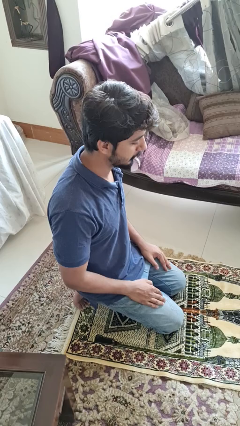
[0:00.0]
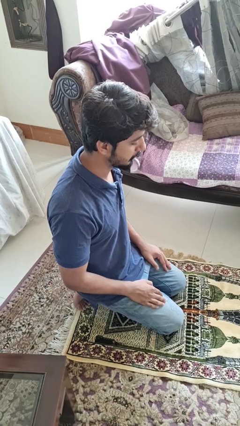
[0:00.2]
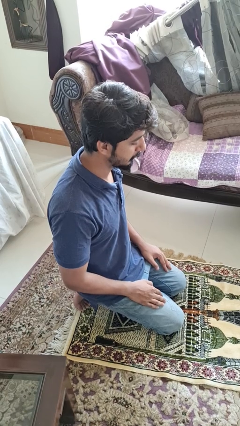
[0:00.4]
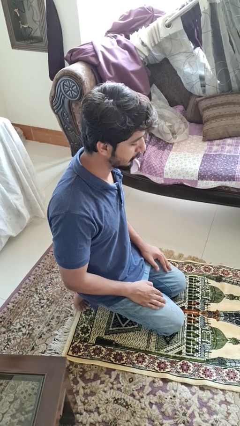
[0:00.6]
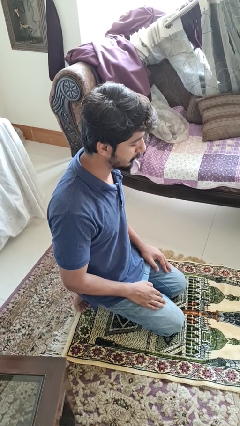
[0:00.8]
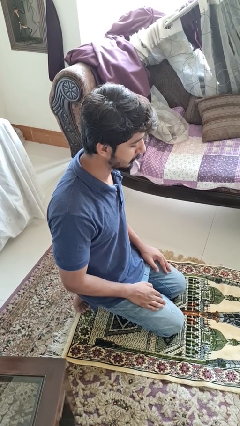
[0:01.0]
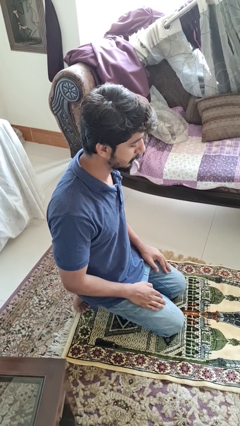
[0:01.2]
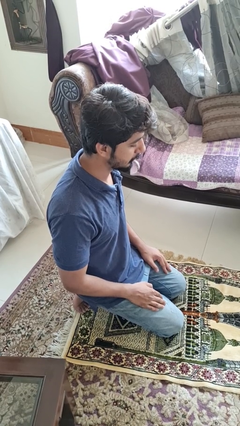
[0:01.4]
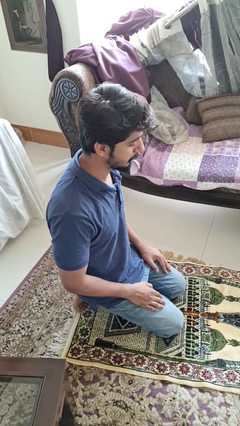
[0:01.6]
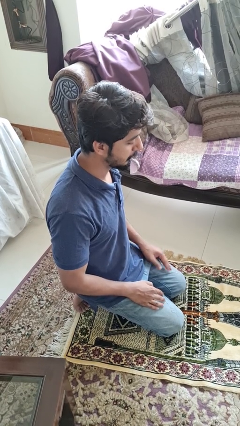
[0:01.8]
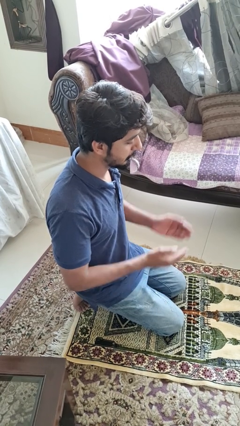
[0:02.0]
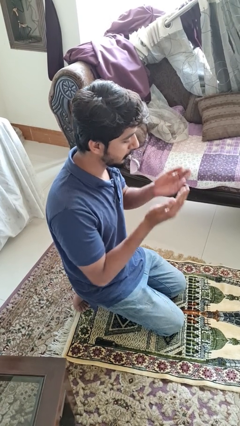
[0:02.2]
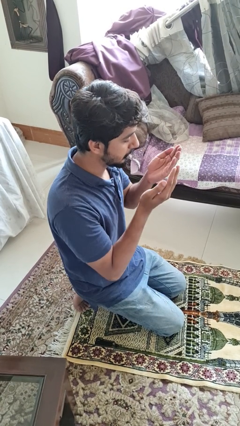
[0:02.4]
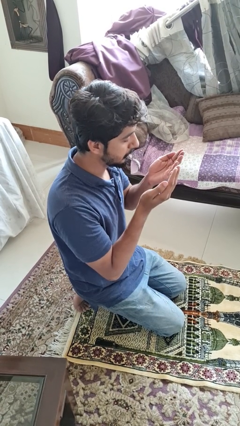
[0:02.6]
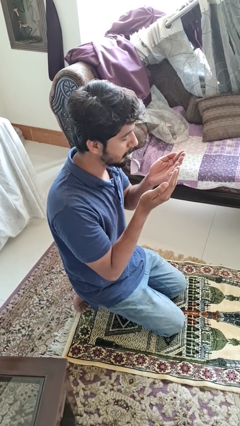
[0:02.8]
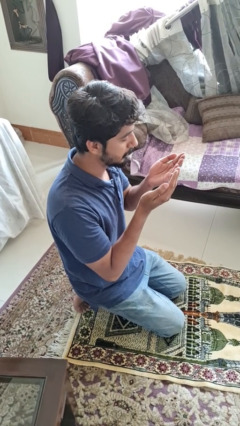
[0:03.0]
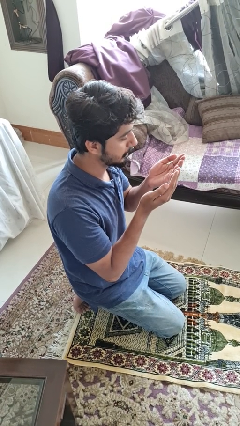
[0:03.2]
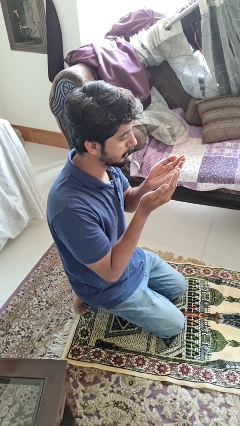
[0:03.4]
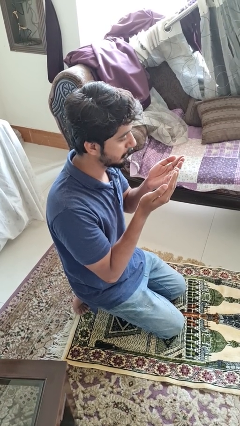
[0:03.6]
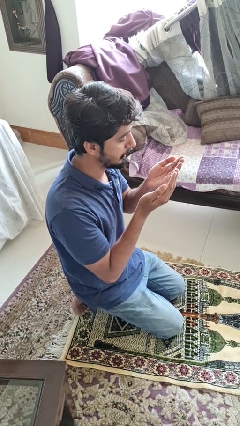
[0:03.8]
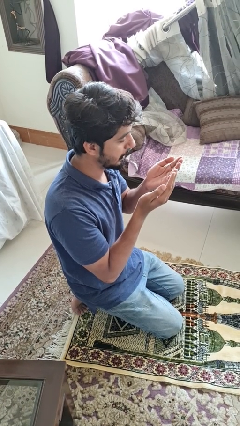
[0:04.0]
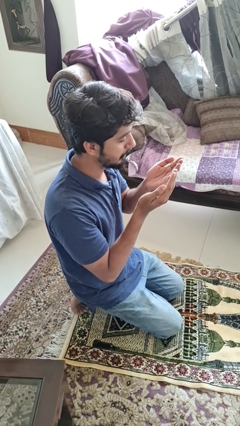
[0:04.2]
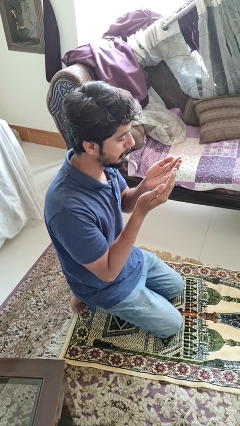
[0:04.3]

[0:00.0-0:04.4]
person prays

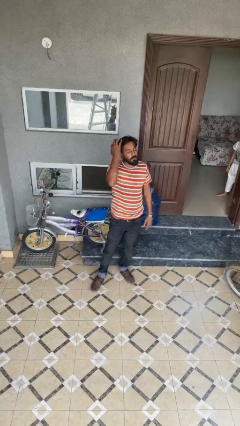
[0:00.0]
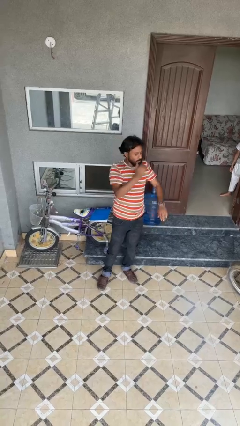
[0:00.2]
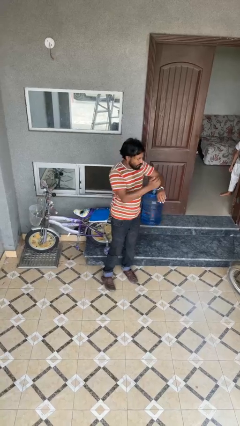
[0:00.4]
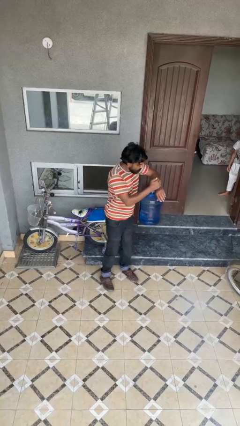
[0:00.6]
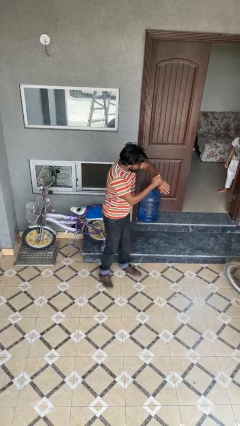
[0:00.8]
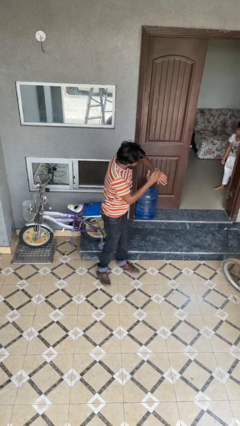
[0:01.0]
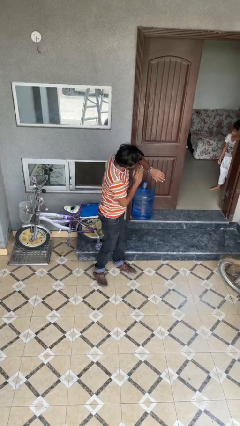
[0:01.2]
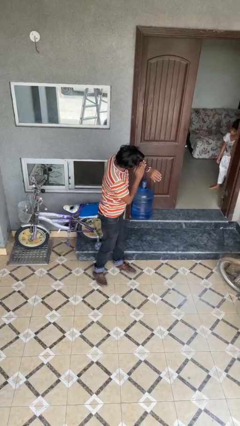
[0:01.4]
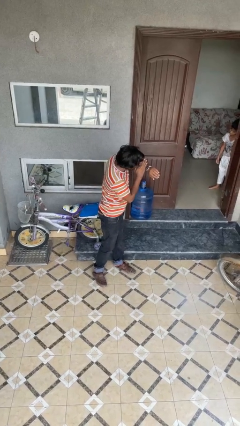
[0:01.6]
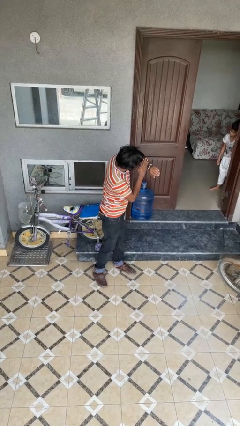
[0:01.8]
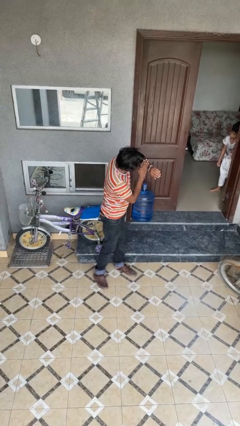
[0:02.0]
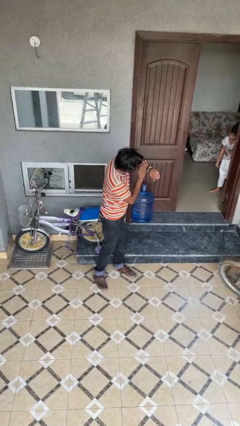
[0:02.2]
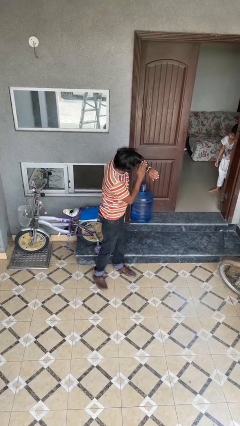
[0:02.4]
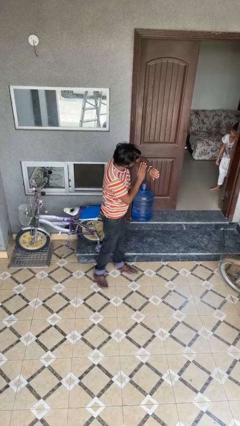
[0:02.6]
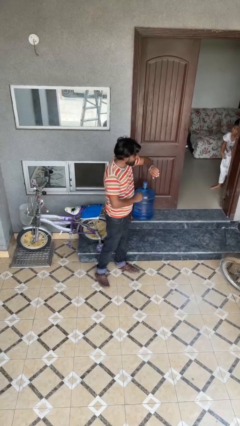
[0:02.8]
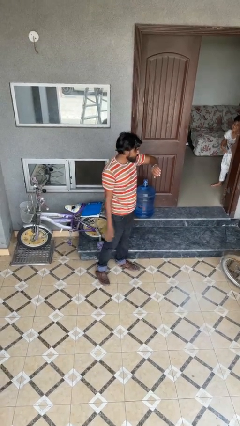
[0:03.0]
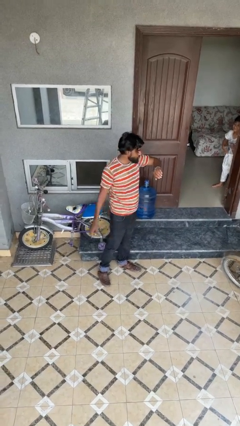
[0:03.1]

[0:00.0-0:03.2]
person looks at wristwatch

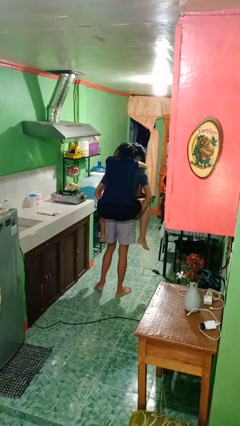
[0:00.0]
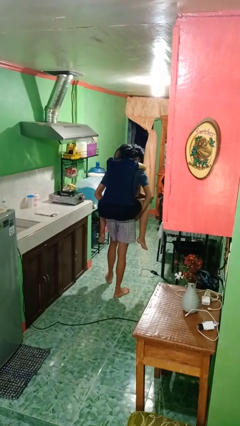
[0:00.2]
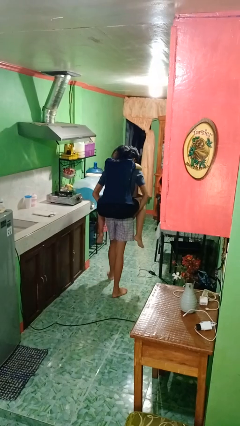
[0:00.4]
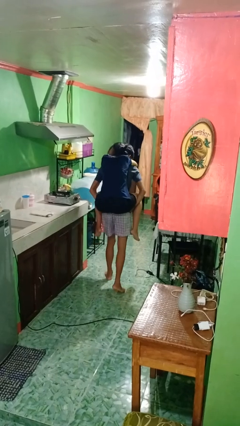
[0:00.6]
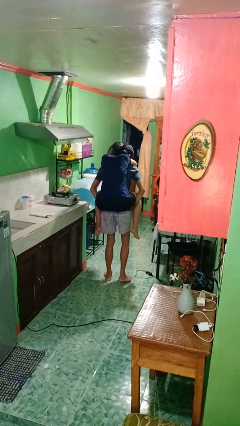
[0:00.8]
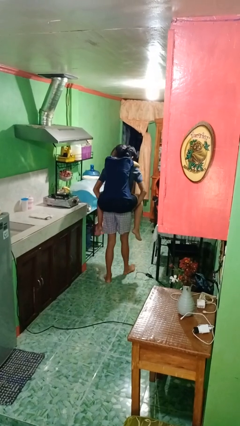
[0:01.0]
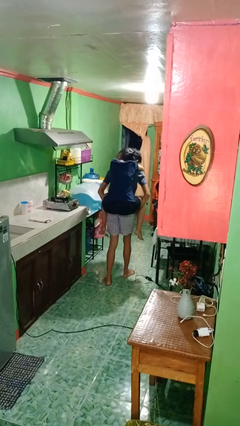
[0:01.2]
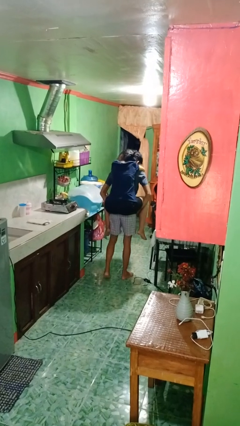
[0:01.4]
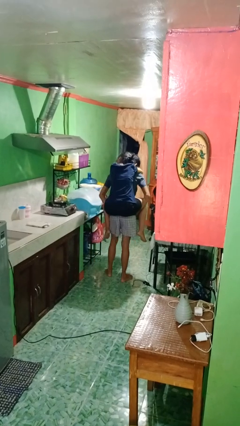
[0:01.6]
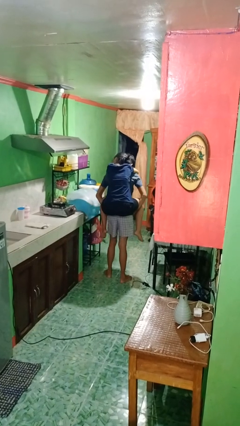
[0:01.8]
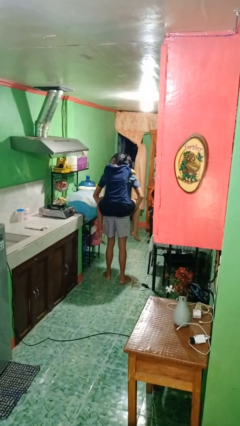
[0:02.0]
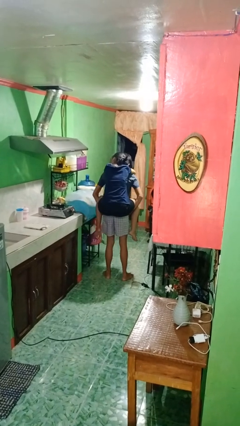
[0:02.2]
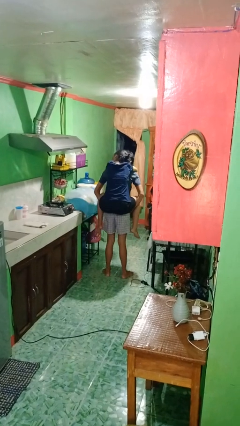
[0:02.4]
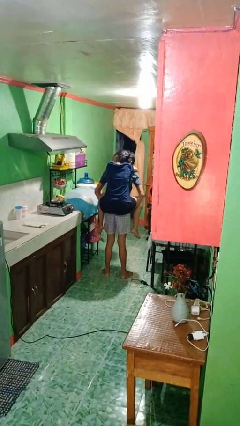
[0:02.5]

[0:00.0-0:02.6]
person carries person on back

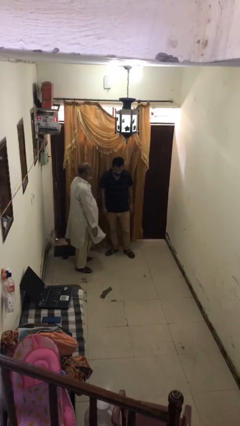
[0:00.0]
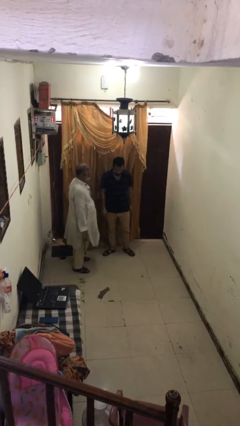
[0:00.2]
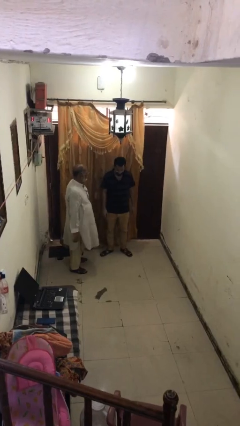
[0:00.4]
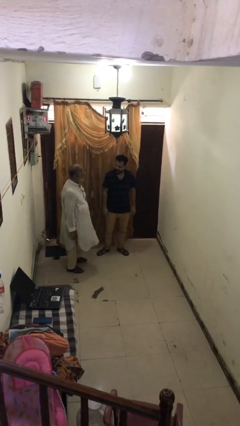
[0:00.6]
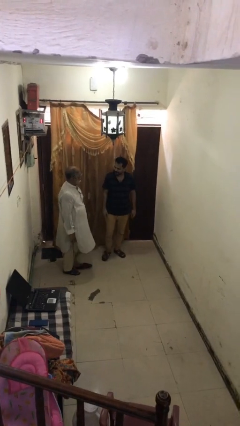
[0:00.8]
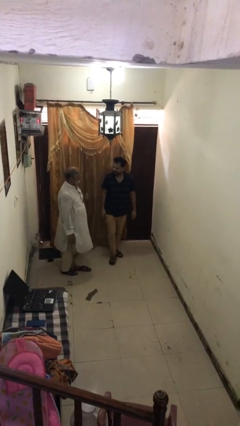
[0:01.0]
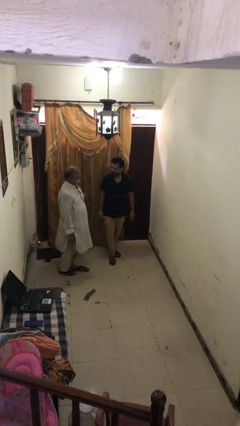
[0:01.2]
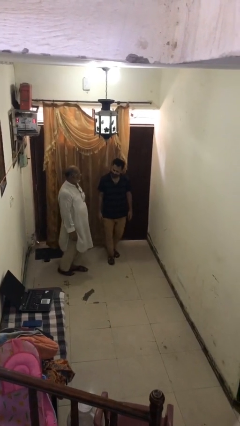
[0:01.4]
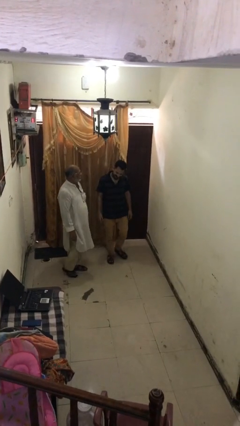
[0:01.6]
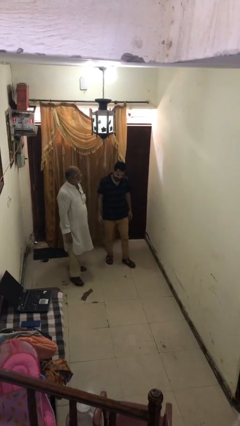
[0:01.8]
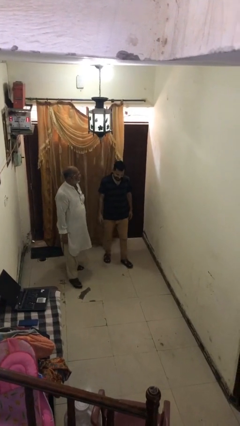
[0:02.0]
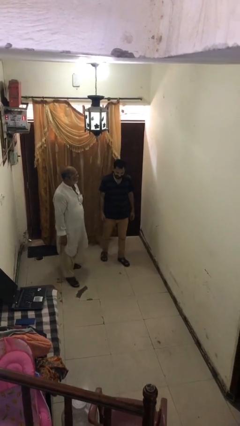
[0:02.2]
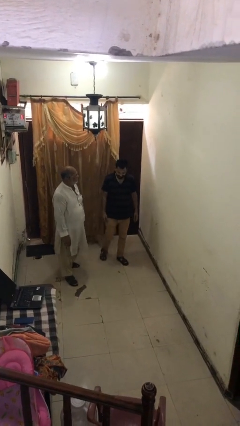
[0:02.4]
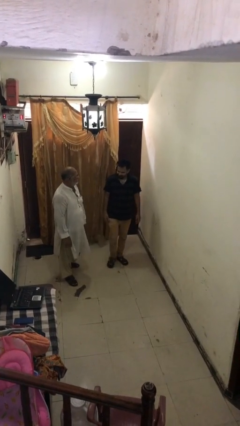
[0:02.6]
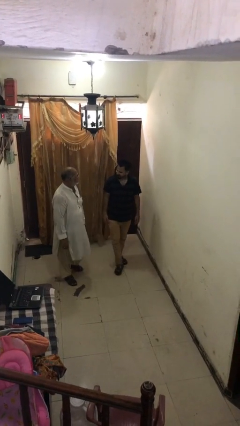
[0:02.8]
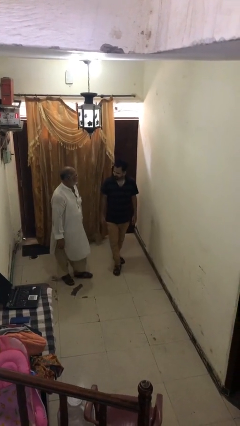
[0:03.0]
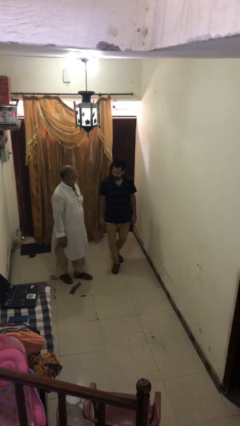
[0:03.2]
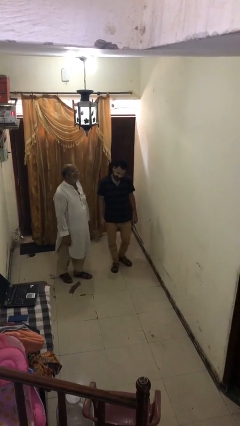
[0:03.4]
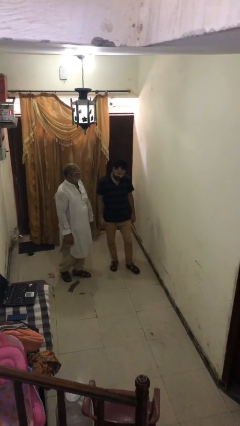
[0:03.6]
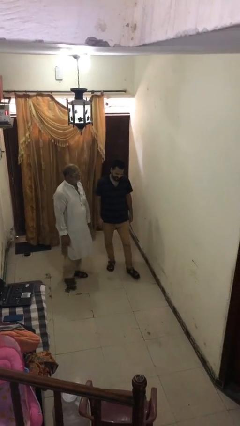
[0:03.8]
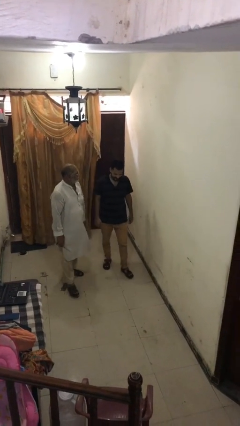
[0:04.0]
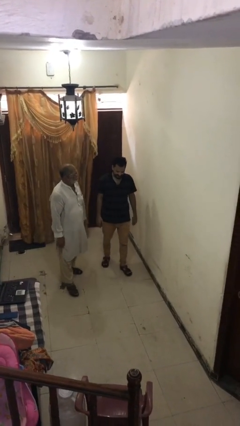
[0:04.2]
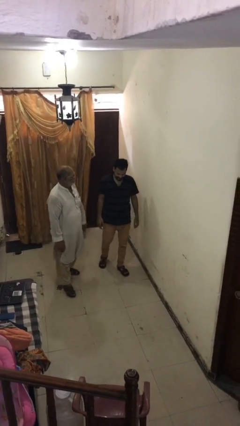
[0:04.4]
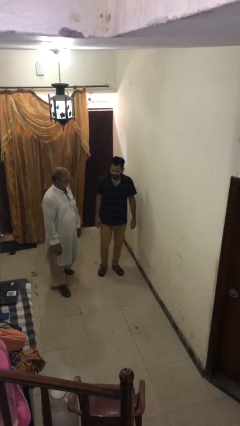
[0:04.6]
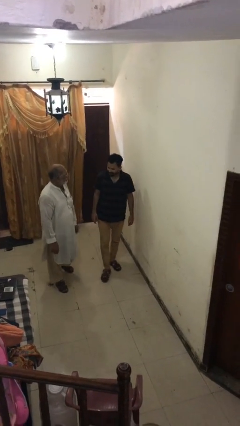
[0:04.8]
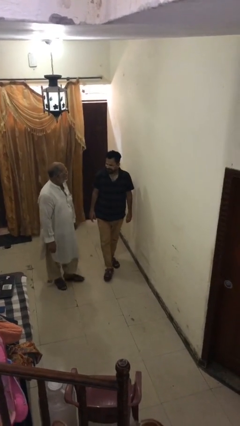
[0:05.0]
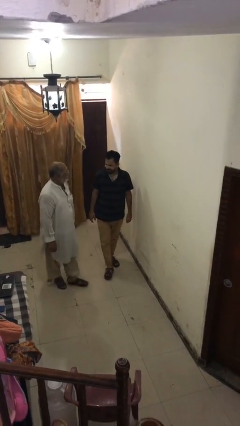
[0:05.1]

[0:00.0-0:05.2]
person talks to person

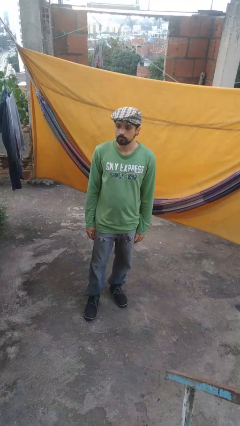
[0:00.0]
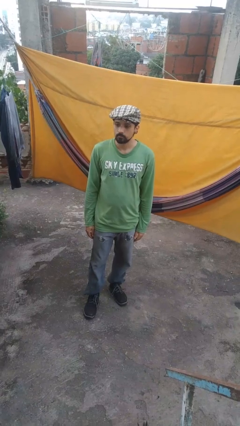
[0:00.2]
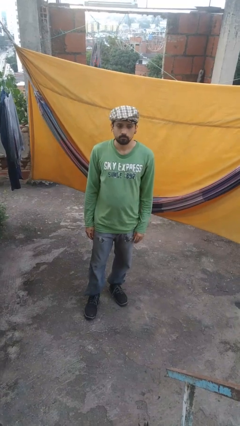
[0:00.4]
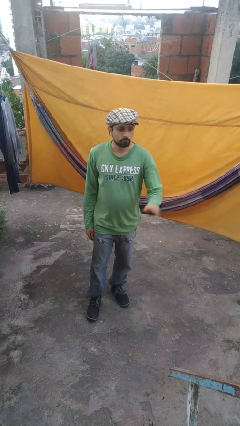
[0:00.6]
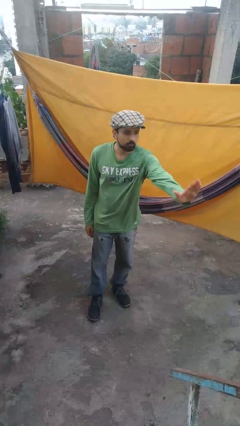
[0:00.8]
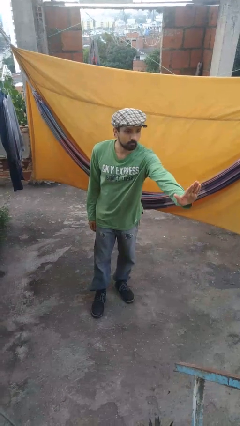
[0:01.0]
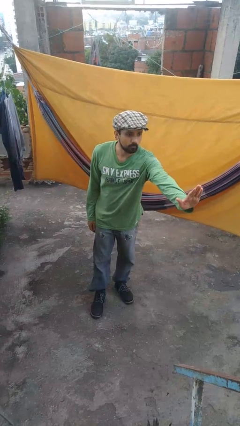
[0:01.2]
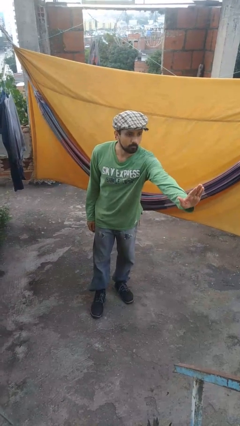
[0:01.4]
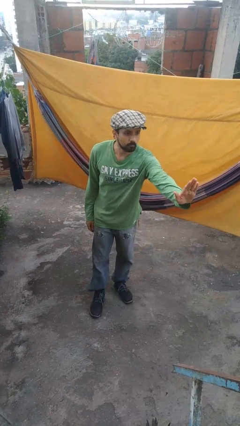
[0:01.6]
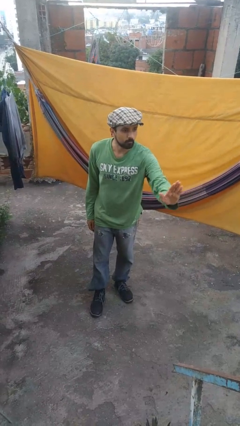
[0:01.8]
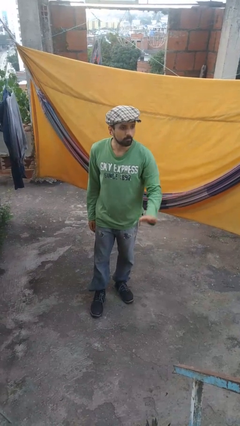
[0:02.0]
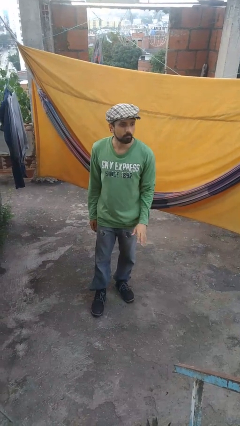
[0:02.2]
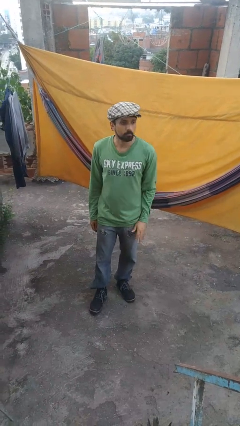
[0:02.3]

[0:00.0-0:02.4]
person gestures stop
